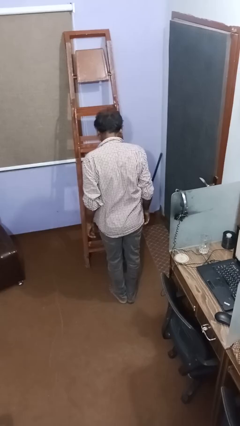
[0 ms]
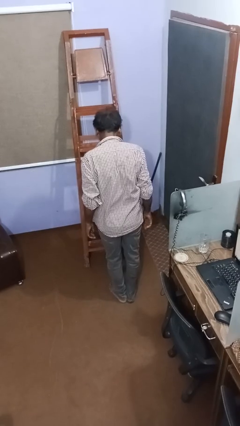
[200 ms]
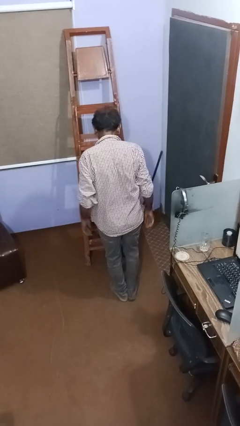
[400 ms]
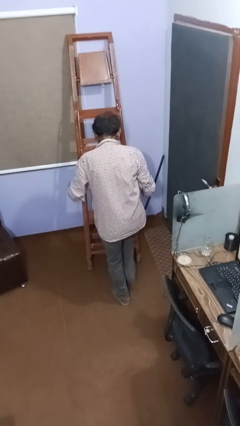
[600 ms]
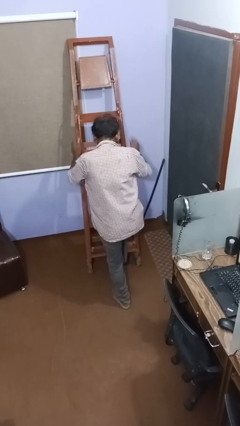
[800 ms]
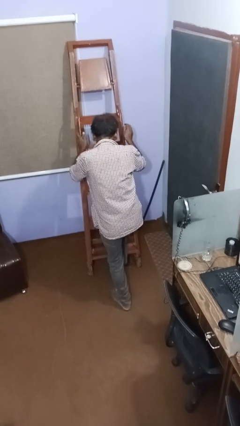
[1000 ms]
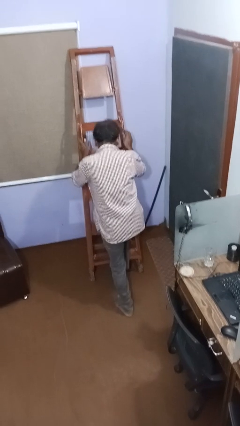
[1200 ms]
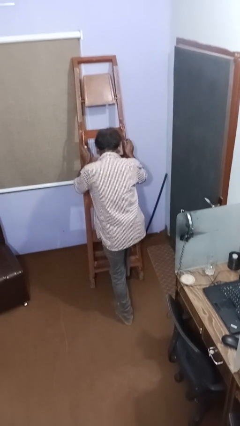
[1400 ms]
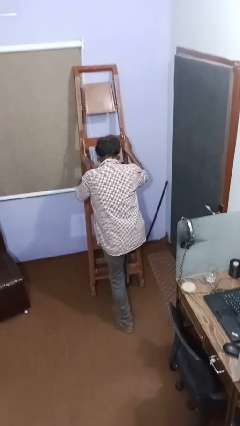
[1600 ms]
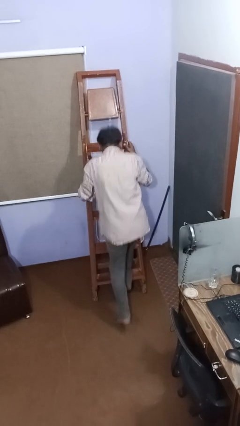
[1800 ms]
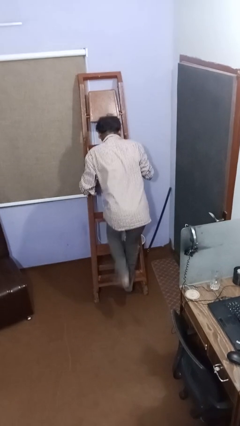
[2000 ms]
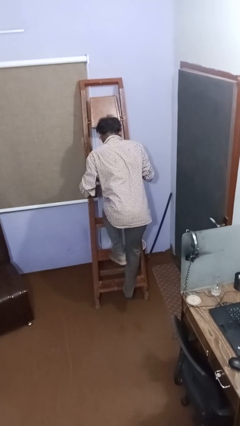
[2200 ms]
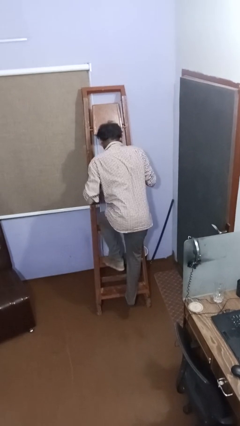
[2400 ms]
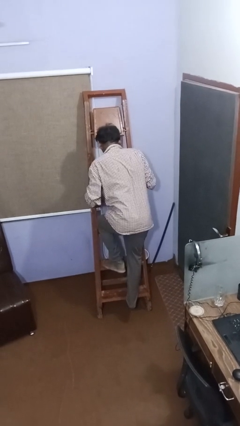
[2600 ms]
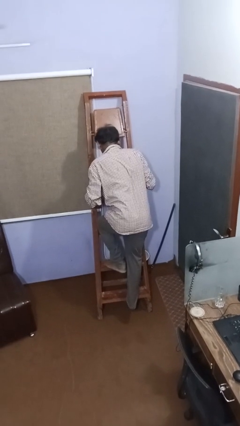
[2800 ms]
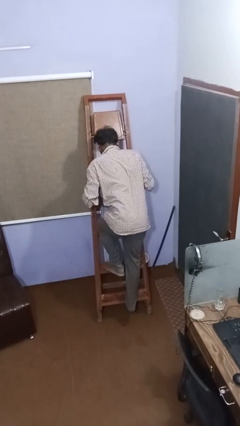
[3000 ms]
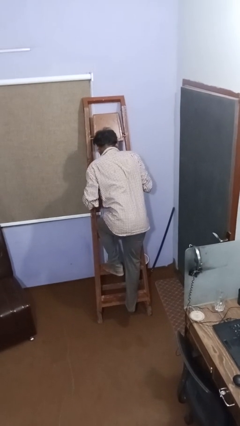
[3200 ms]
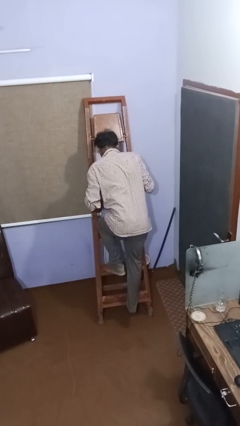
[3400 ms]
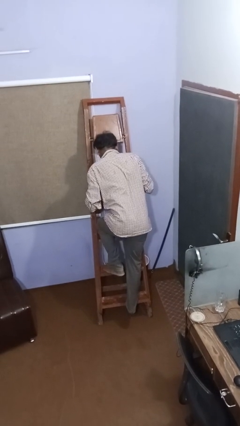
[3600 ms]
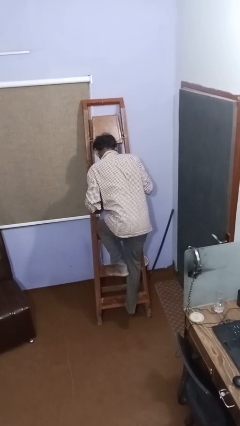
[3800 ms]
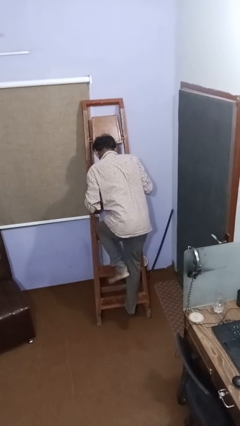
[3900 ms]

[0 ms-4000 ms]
person climbs up ladder

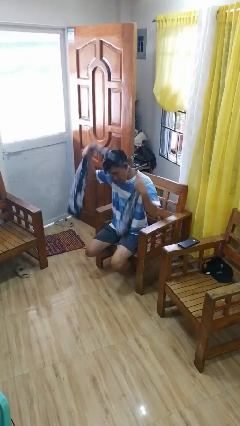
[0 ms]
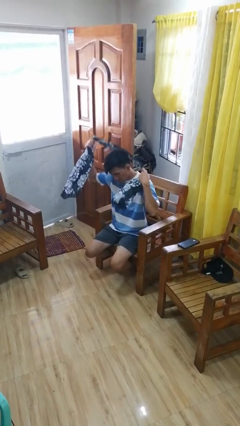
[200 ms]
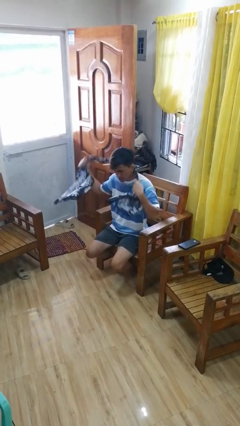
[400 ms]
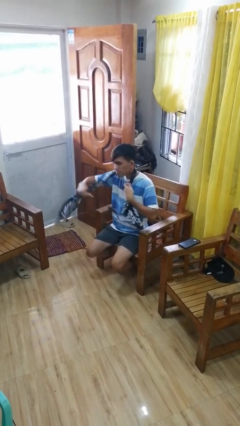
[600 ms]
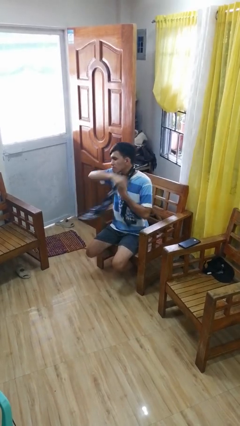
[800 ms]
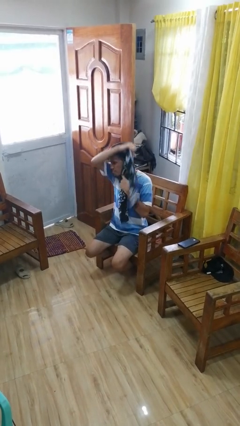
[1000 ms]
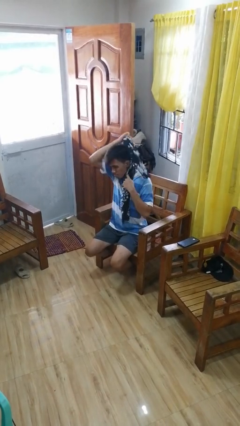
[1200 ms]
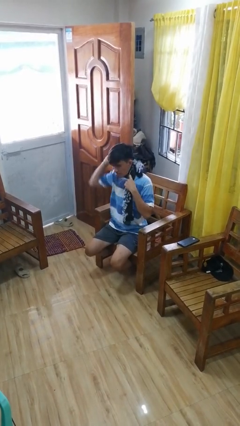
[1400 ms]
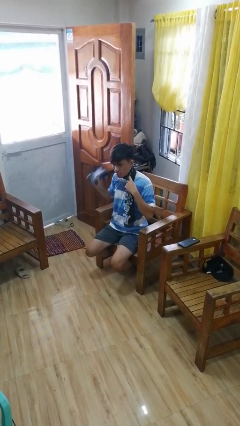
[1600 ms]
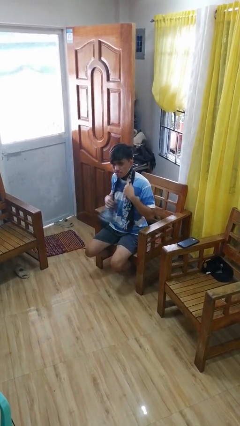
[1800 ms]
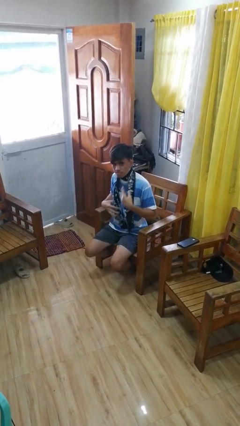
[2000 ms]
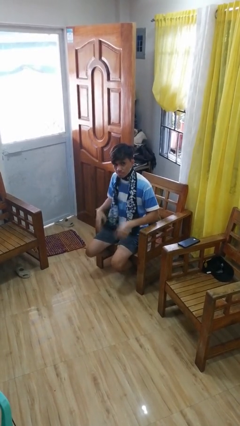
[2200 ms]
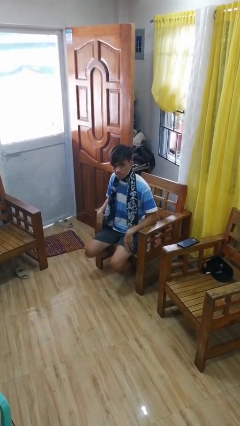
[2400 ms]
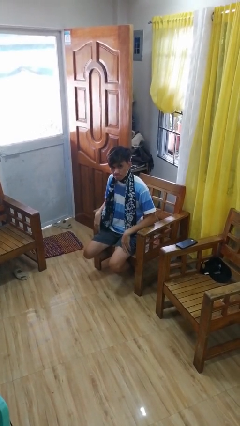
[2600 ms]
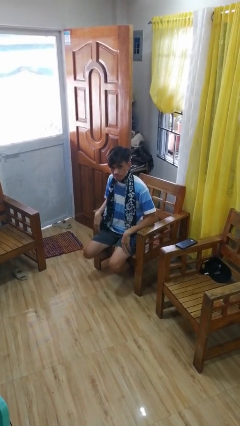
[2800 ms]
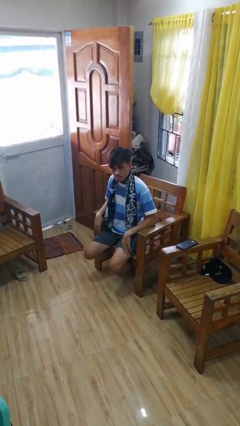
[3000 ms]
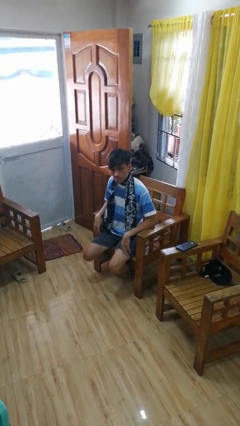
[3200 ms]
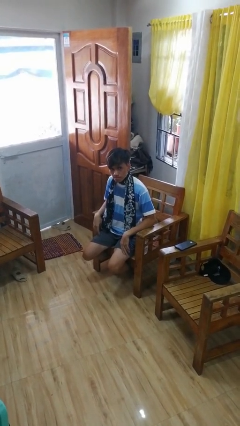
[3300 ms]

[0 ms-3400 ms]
person puts on scarf

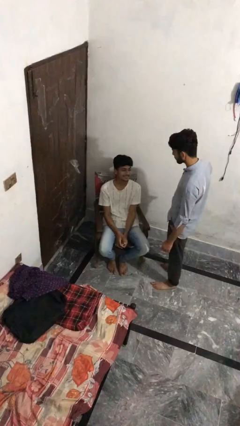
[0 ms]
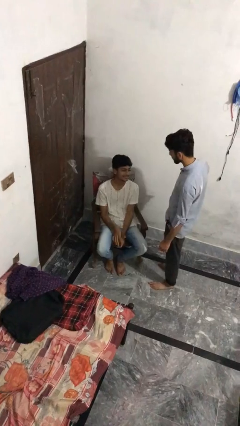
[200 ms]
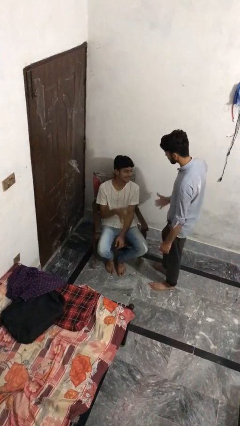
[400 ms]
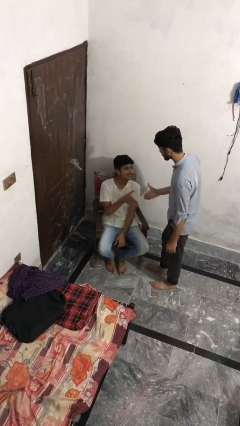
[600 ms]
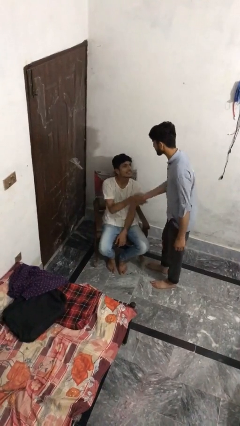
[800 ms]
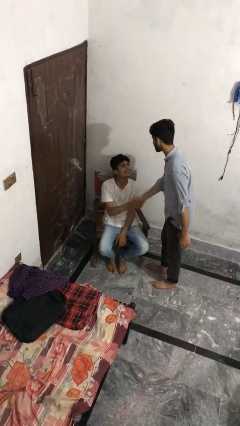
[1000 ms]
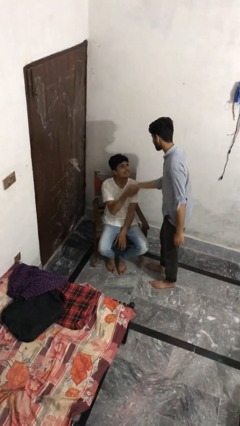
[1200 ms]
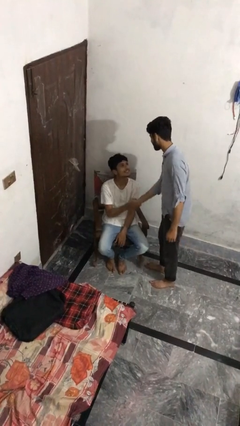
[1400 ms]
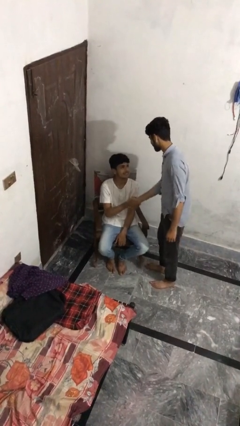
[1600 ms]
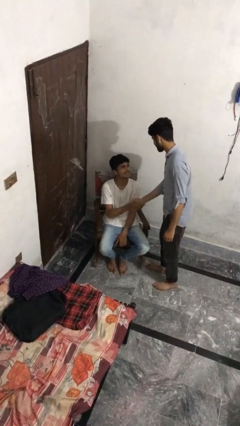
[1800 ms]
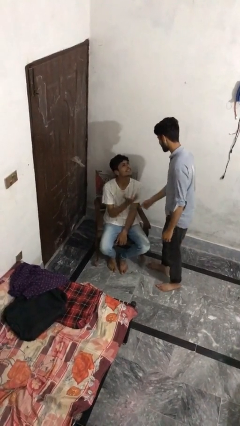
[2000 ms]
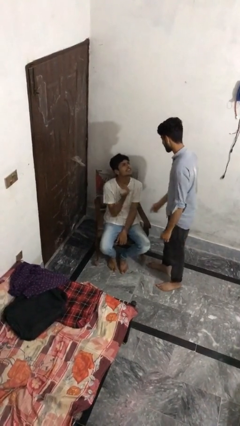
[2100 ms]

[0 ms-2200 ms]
person shakes hand

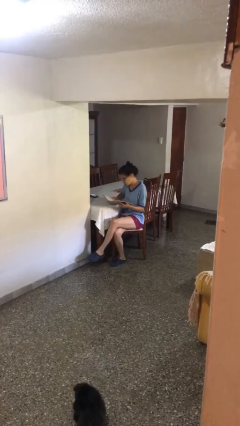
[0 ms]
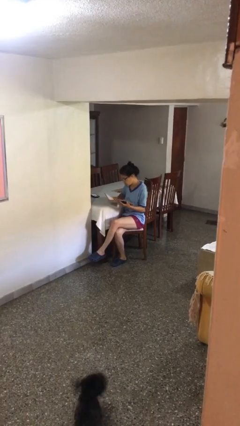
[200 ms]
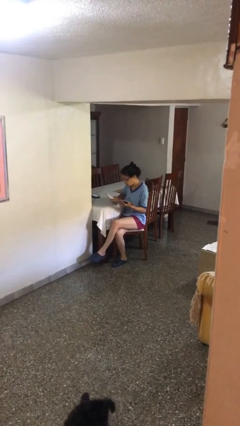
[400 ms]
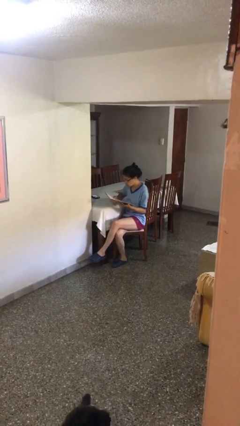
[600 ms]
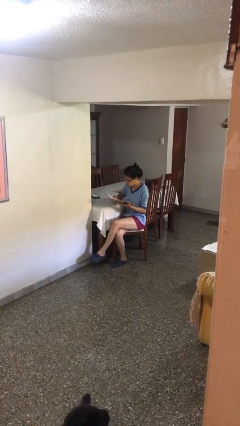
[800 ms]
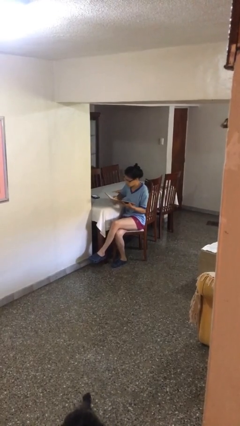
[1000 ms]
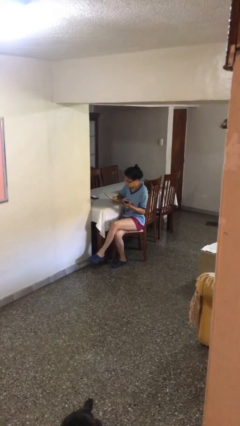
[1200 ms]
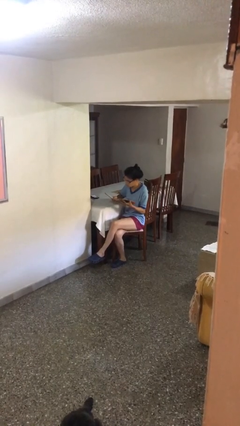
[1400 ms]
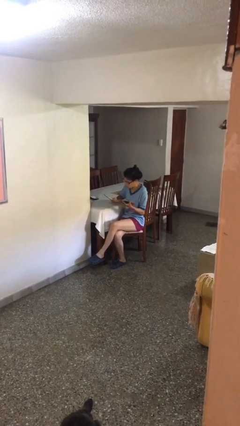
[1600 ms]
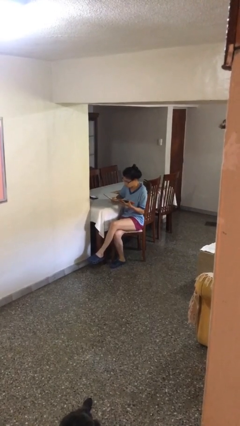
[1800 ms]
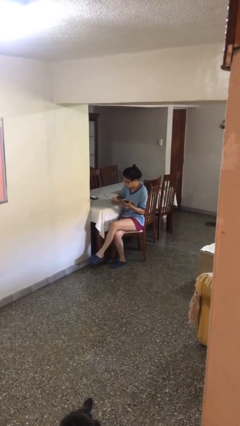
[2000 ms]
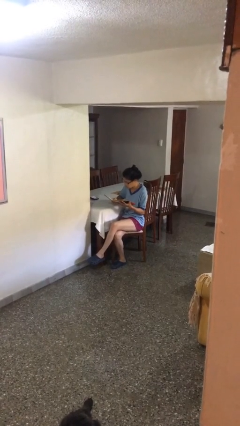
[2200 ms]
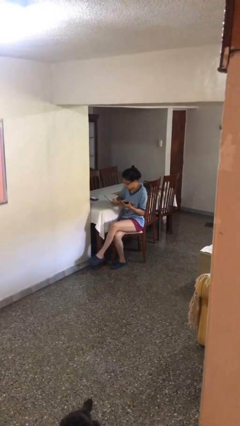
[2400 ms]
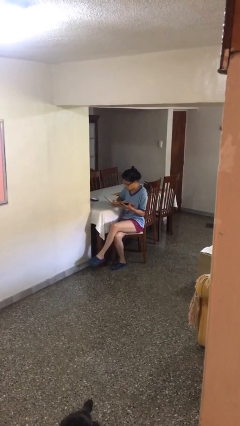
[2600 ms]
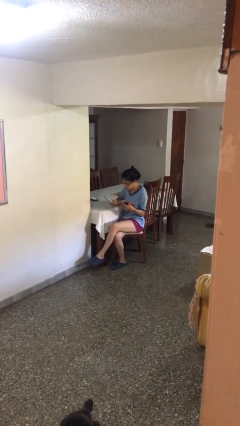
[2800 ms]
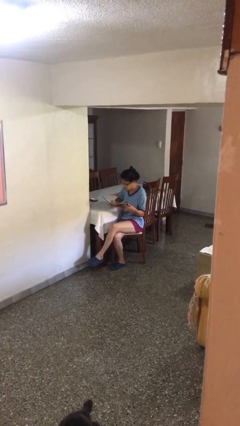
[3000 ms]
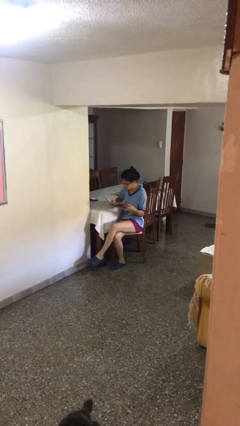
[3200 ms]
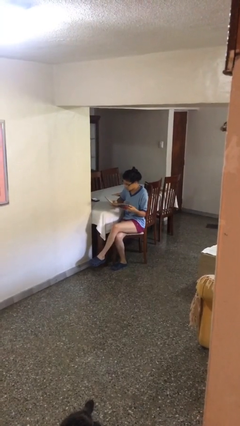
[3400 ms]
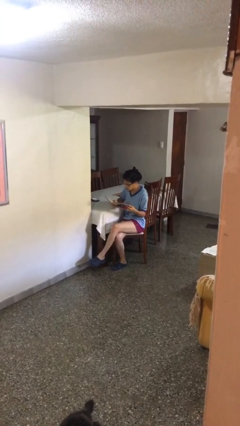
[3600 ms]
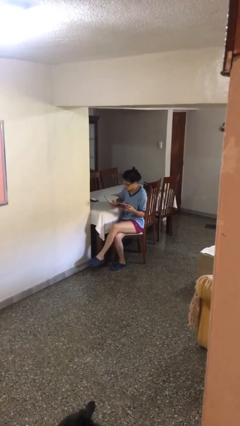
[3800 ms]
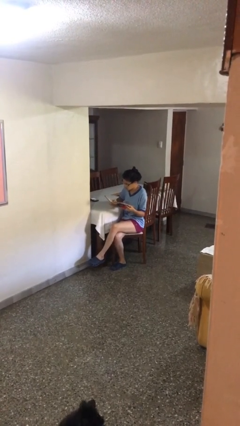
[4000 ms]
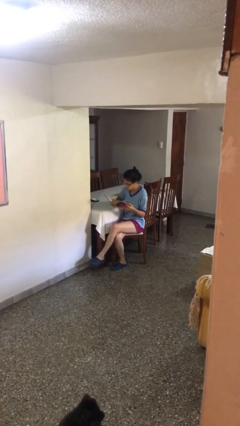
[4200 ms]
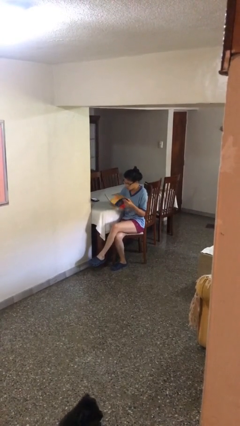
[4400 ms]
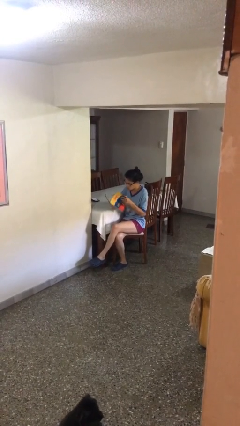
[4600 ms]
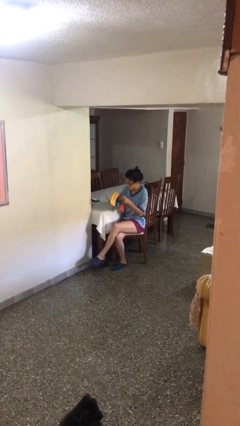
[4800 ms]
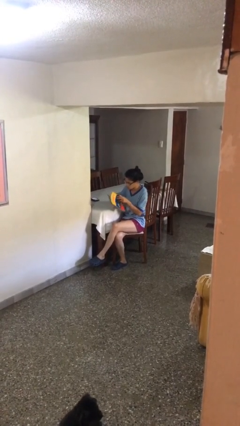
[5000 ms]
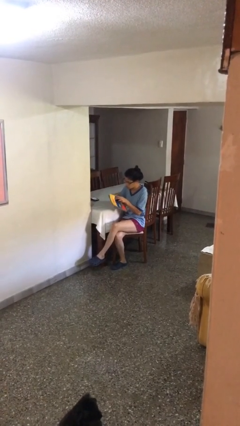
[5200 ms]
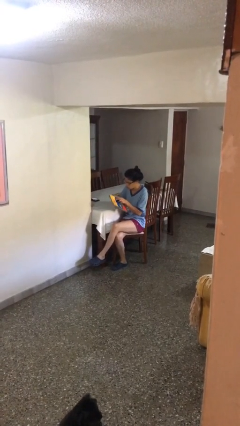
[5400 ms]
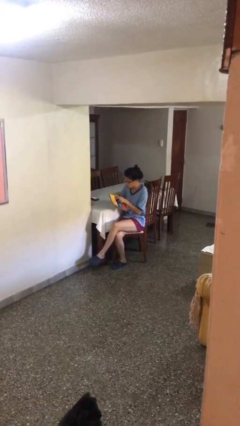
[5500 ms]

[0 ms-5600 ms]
person reads document

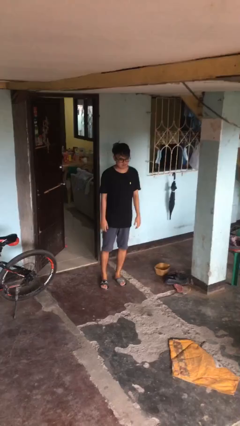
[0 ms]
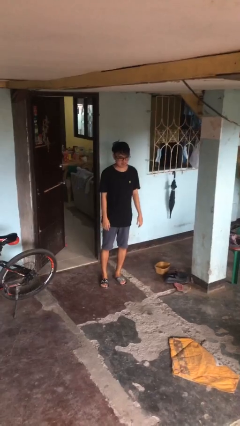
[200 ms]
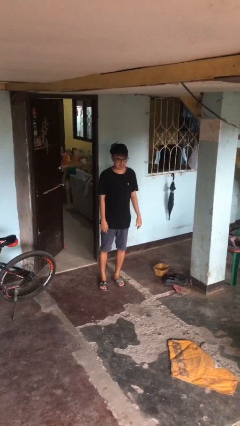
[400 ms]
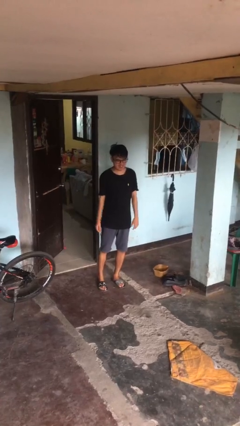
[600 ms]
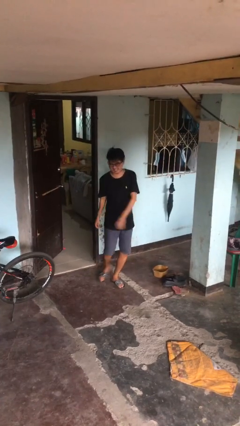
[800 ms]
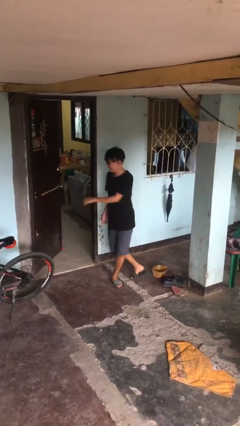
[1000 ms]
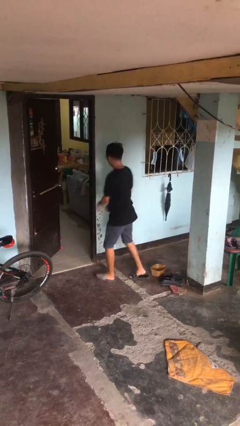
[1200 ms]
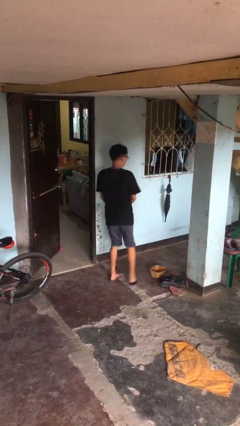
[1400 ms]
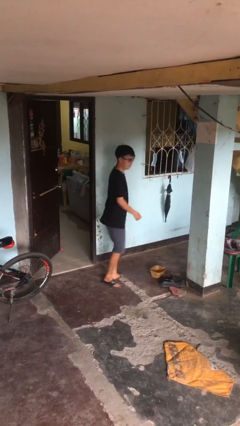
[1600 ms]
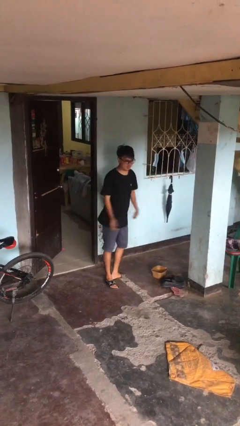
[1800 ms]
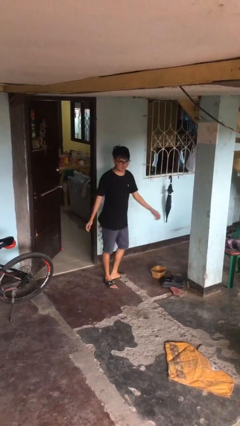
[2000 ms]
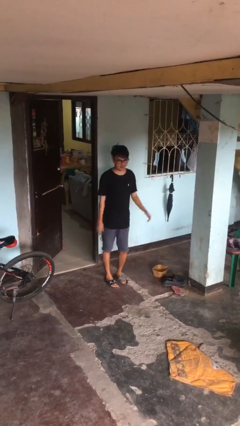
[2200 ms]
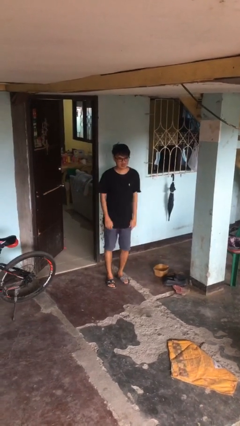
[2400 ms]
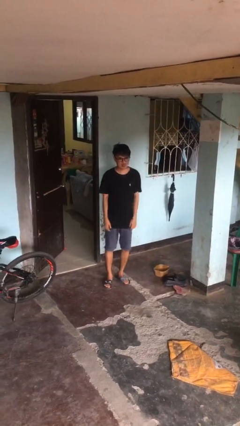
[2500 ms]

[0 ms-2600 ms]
person twirls
